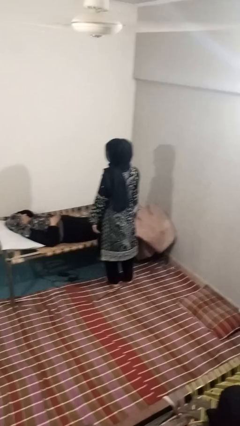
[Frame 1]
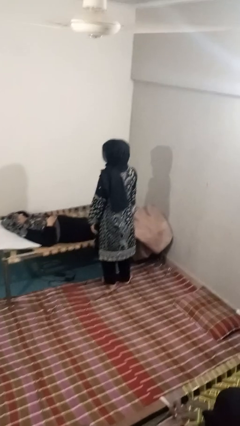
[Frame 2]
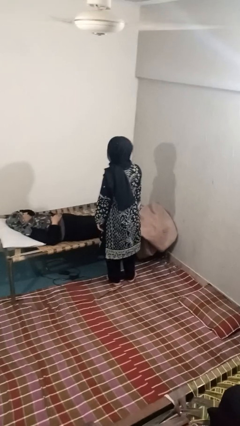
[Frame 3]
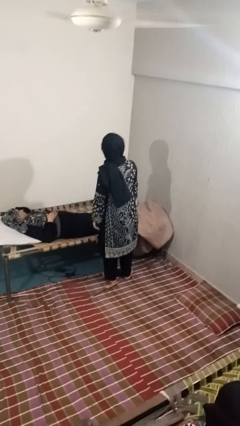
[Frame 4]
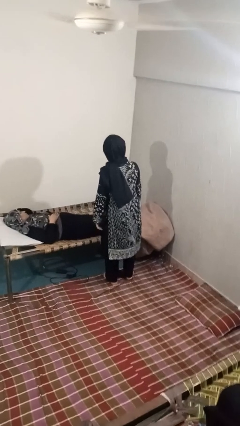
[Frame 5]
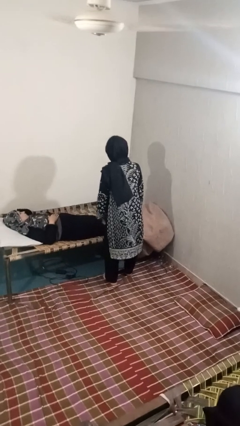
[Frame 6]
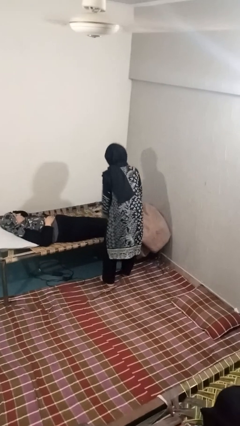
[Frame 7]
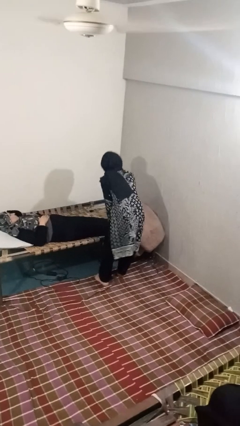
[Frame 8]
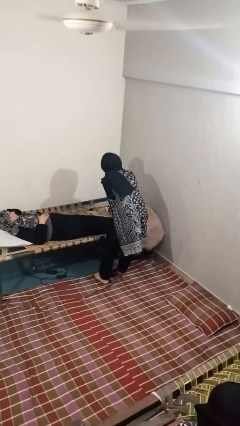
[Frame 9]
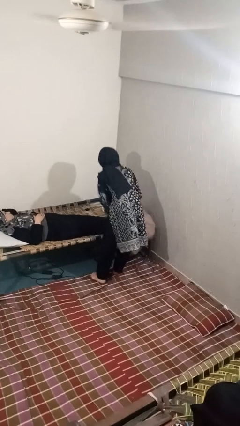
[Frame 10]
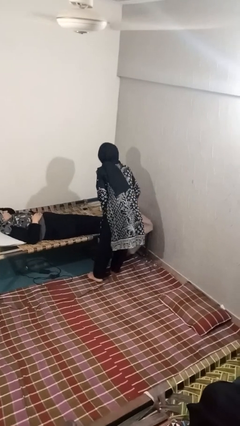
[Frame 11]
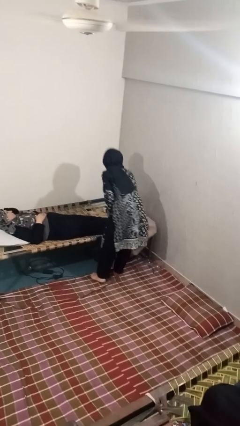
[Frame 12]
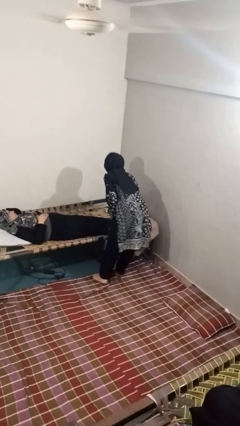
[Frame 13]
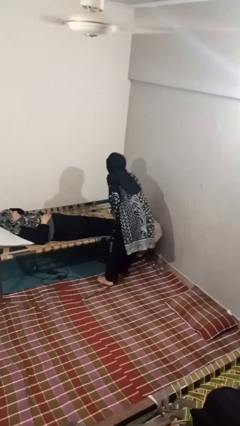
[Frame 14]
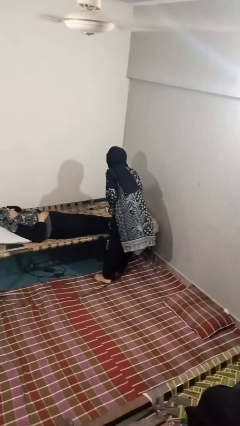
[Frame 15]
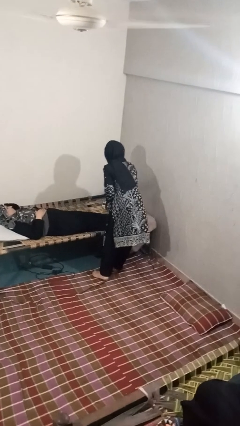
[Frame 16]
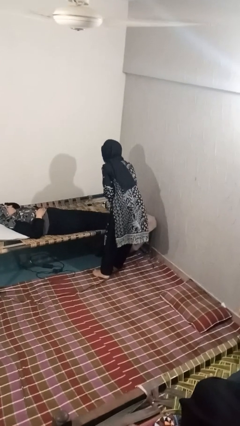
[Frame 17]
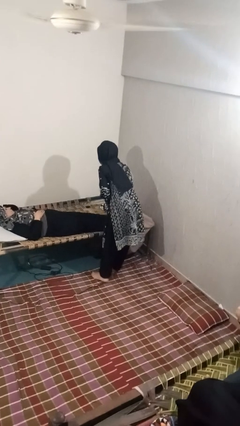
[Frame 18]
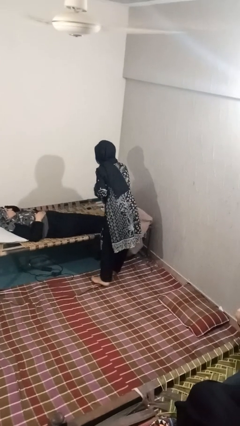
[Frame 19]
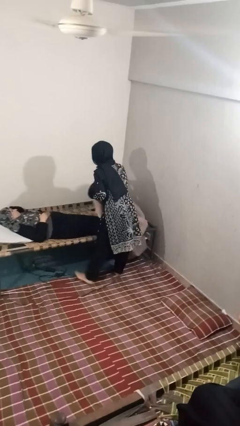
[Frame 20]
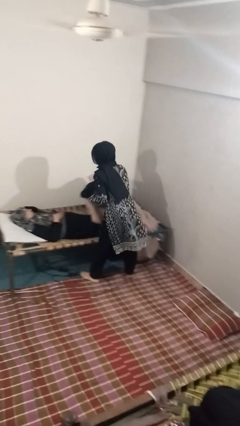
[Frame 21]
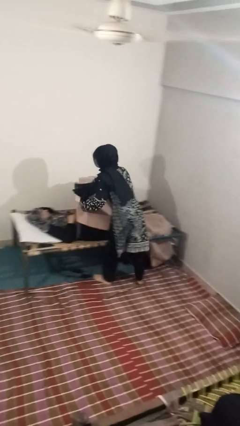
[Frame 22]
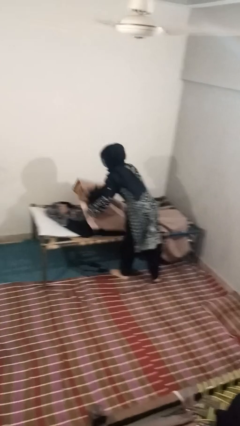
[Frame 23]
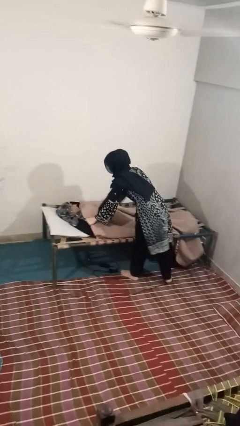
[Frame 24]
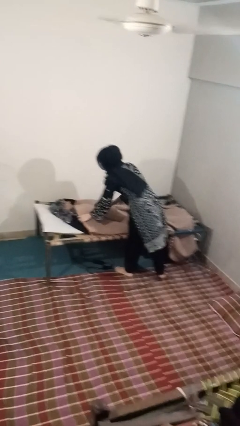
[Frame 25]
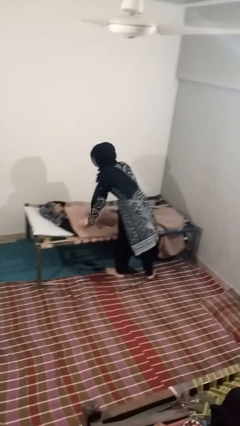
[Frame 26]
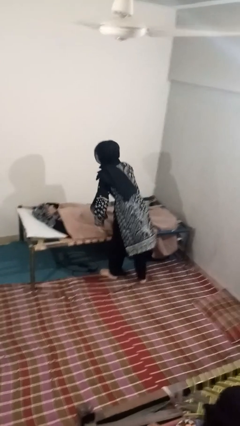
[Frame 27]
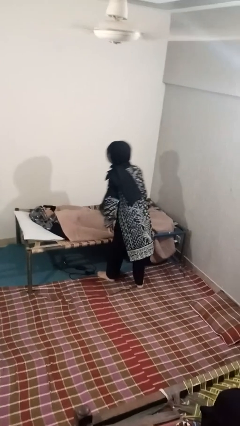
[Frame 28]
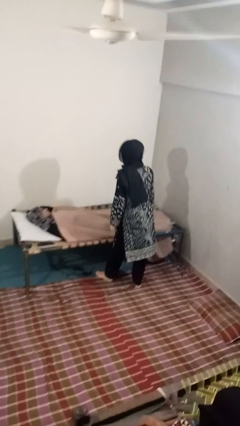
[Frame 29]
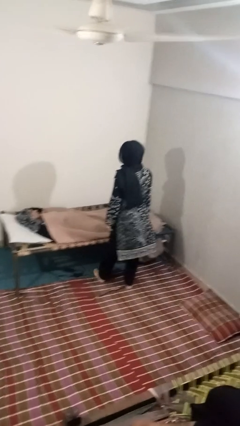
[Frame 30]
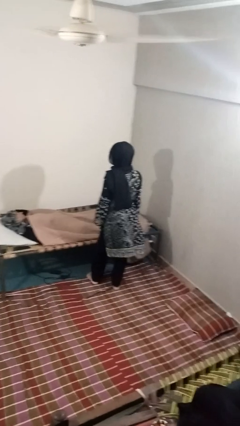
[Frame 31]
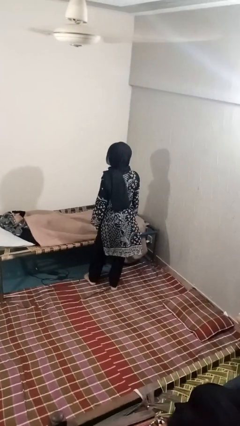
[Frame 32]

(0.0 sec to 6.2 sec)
person covers friend with blanket

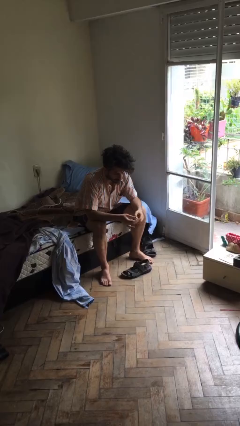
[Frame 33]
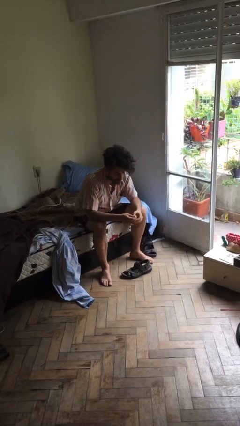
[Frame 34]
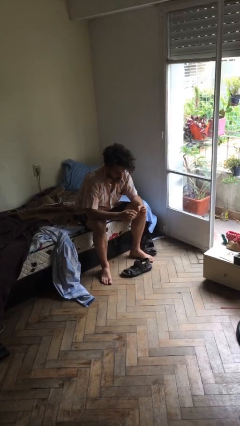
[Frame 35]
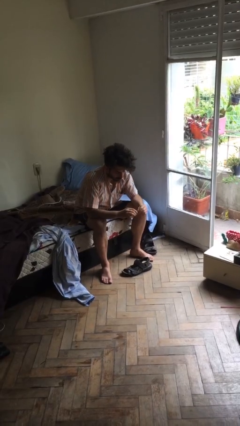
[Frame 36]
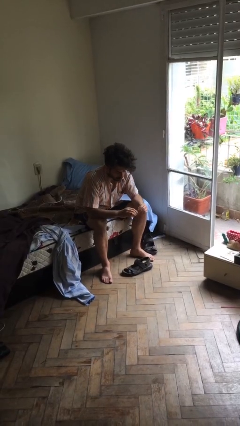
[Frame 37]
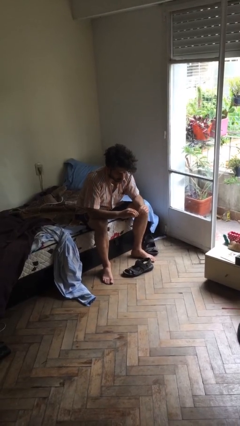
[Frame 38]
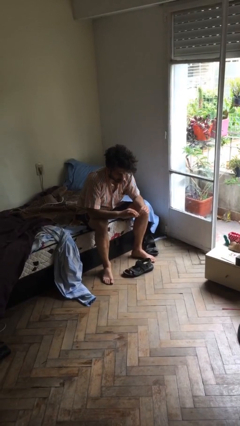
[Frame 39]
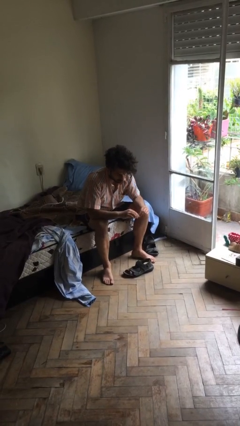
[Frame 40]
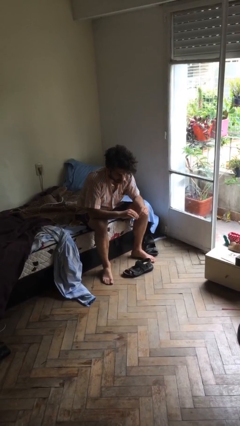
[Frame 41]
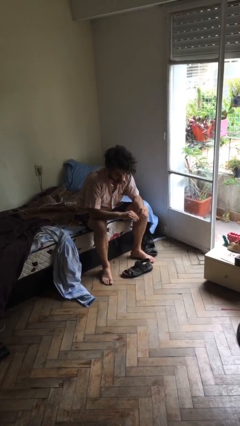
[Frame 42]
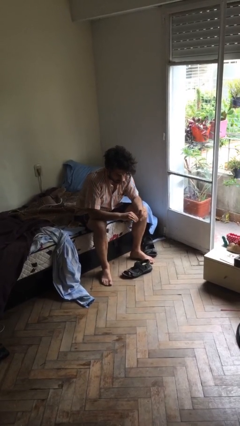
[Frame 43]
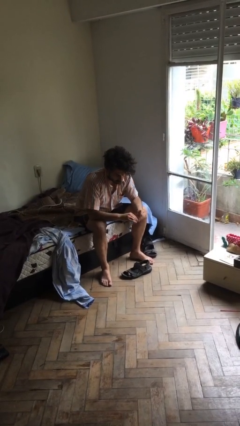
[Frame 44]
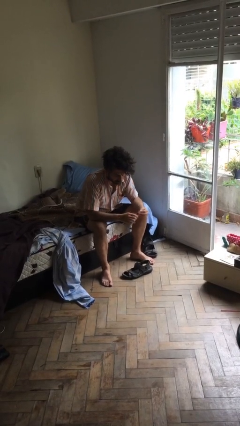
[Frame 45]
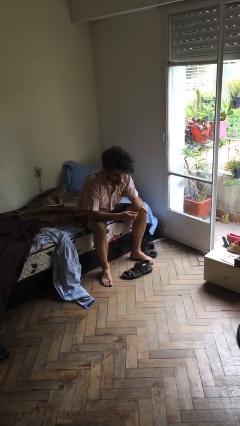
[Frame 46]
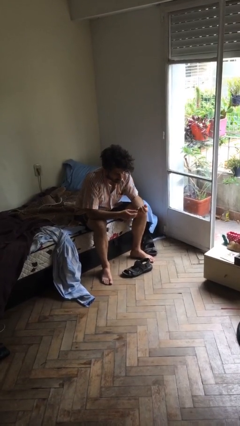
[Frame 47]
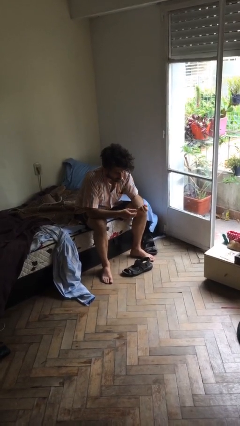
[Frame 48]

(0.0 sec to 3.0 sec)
person clips fingernails

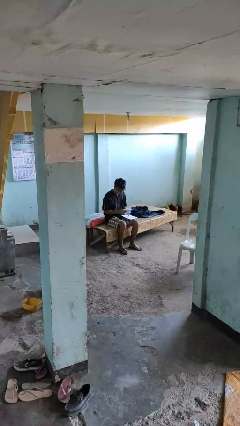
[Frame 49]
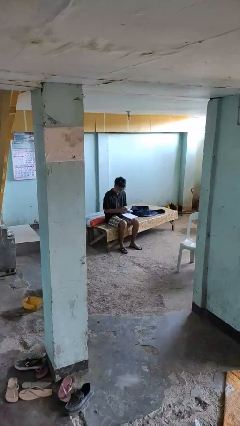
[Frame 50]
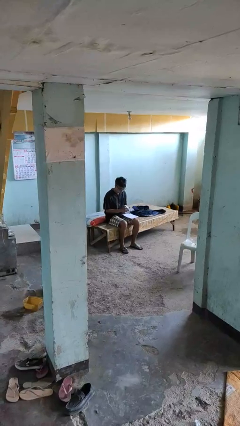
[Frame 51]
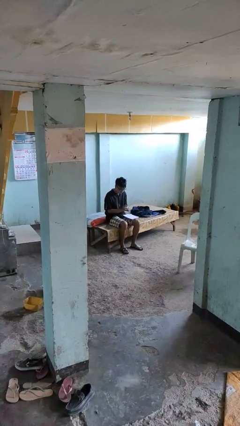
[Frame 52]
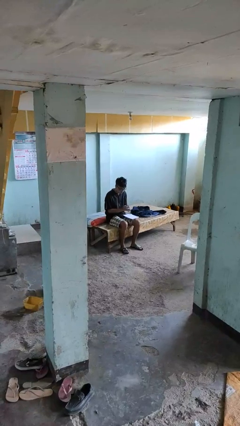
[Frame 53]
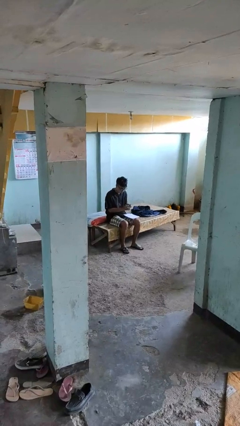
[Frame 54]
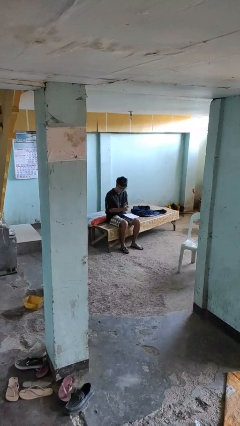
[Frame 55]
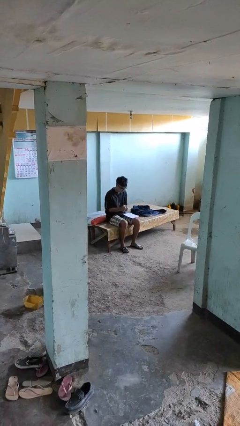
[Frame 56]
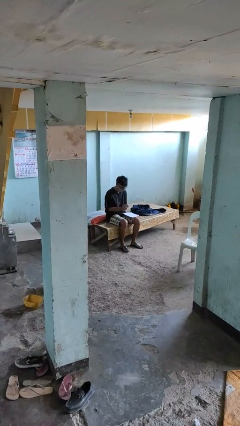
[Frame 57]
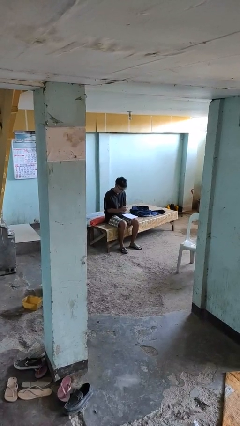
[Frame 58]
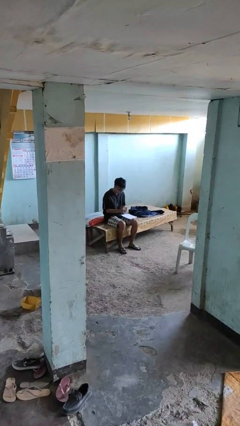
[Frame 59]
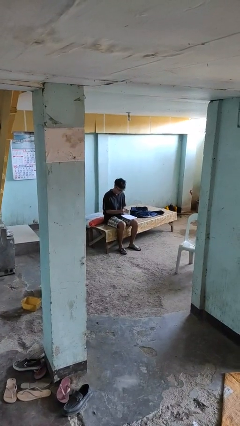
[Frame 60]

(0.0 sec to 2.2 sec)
person crumples paper

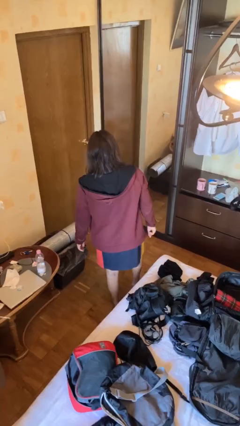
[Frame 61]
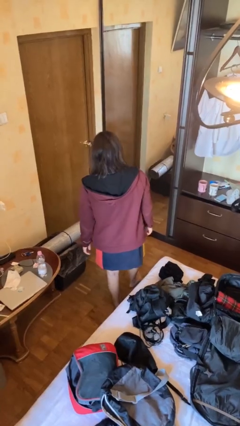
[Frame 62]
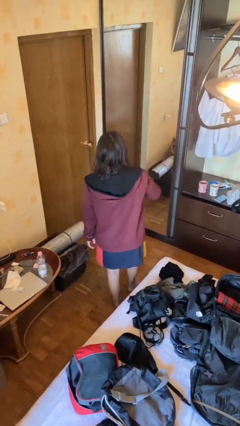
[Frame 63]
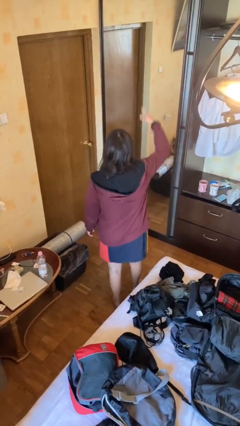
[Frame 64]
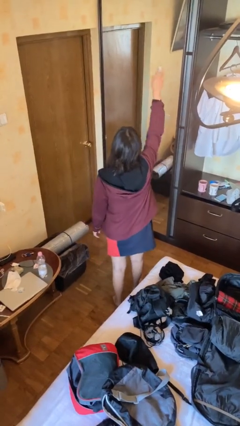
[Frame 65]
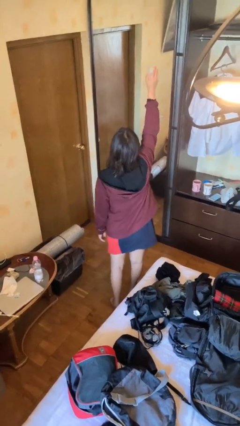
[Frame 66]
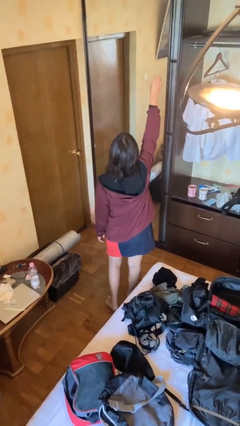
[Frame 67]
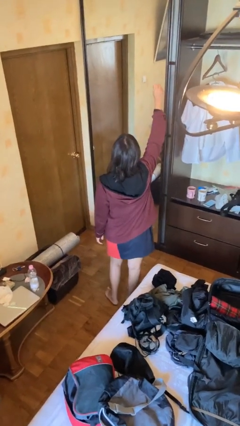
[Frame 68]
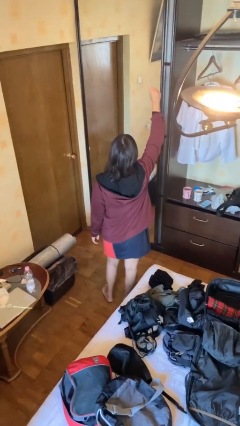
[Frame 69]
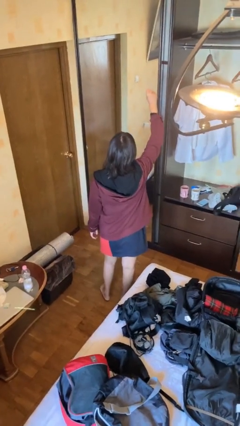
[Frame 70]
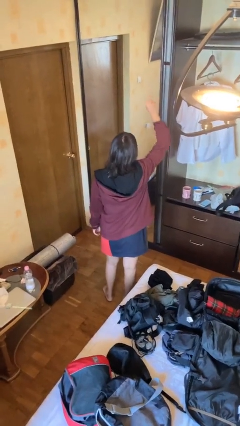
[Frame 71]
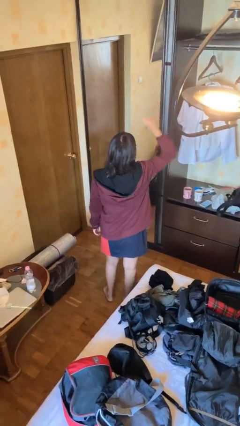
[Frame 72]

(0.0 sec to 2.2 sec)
person gestures raise hand

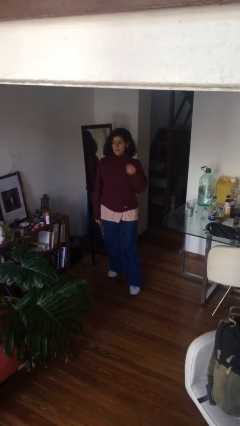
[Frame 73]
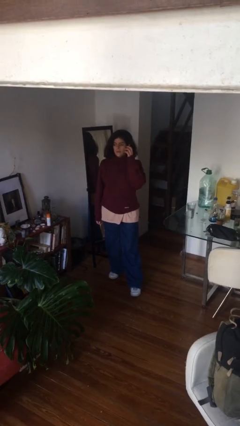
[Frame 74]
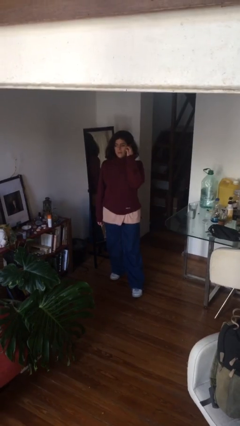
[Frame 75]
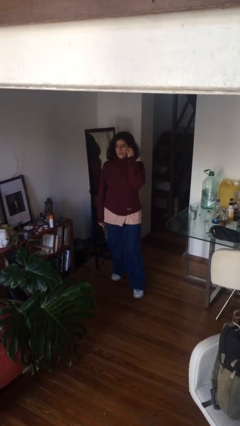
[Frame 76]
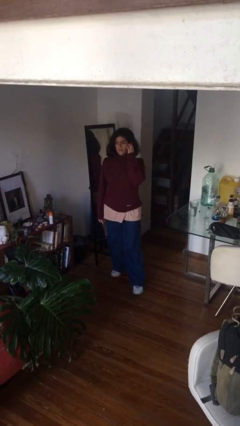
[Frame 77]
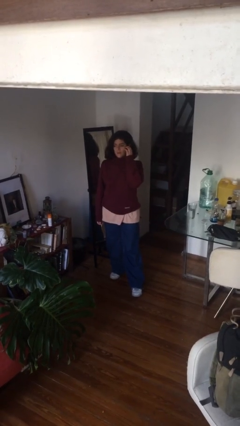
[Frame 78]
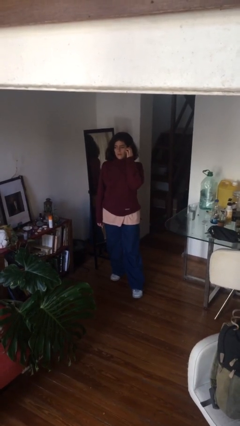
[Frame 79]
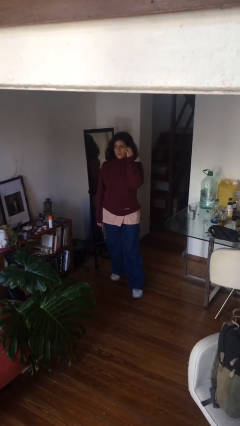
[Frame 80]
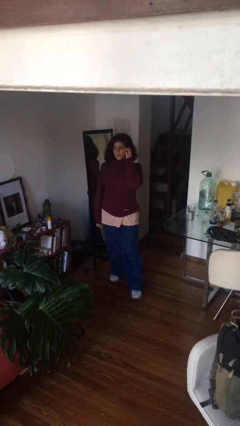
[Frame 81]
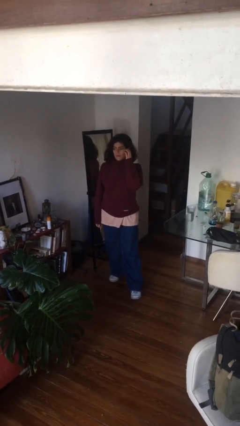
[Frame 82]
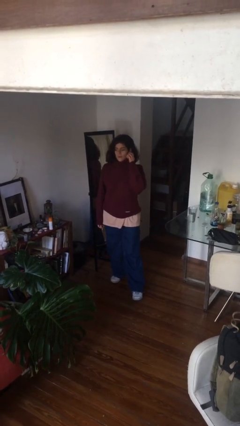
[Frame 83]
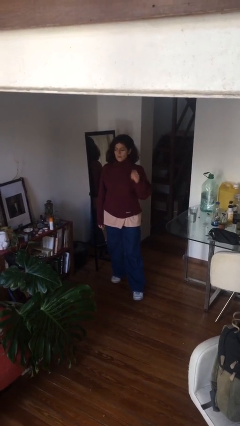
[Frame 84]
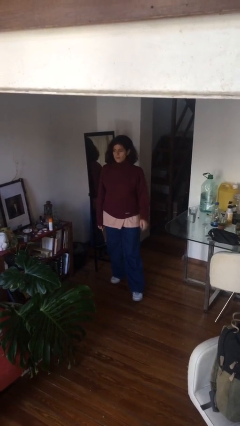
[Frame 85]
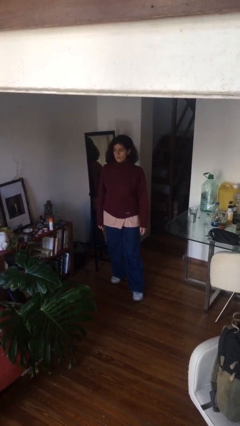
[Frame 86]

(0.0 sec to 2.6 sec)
person scratches face

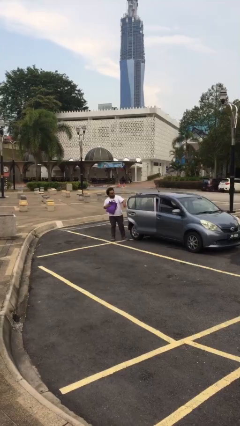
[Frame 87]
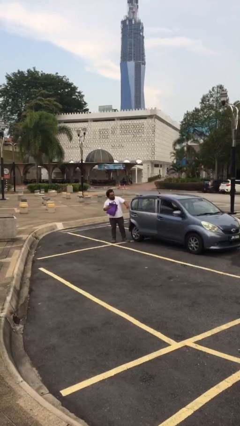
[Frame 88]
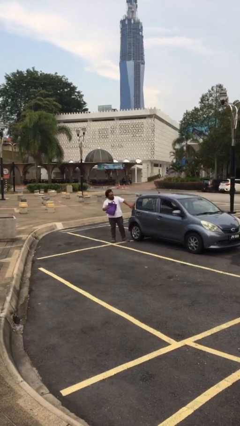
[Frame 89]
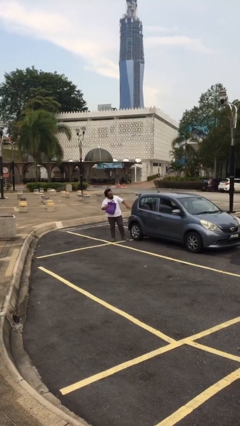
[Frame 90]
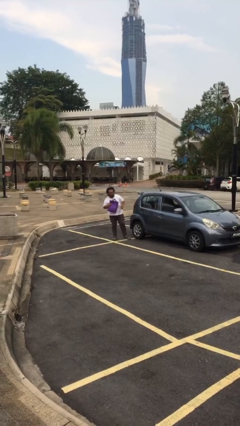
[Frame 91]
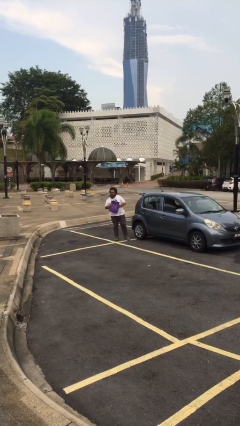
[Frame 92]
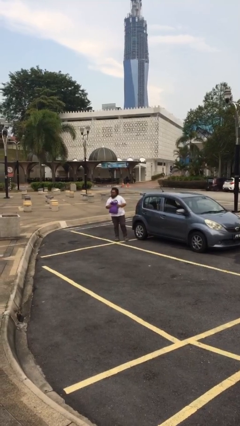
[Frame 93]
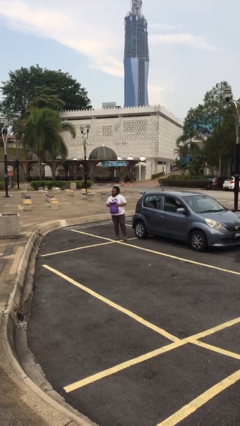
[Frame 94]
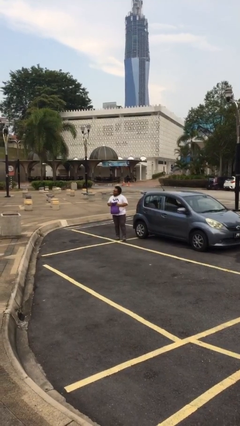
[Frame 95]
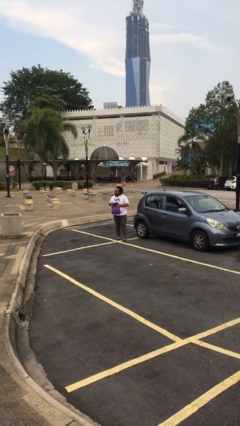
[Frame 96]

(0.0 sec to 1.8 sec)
person closes car door
